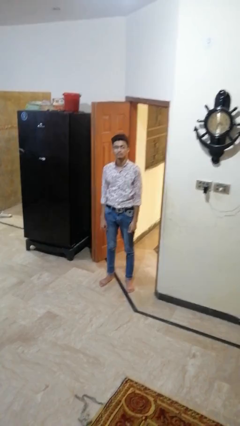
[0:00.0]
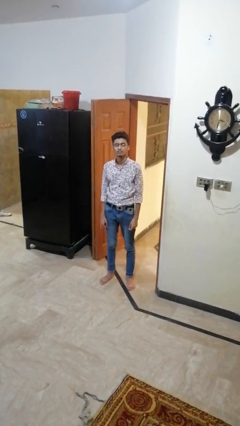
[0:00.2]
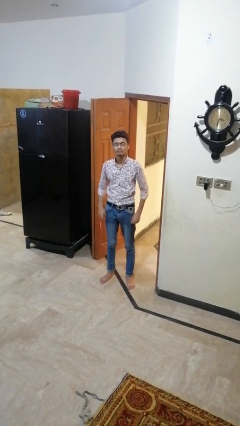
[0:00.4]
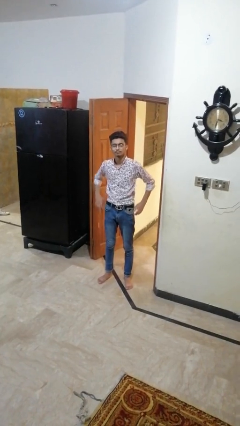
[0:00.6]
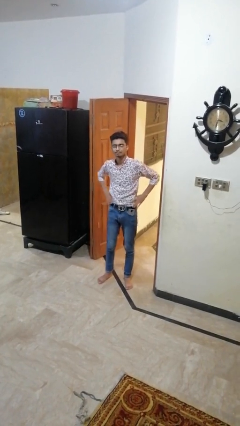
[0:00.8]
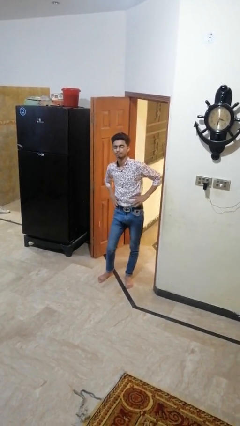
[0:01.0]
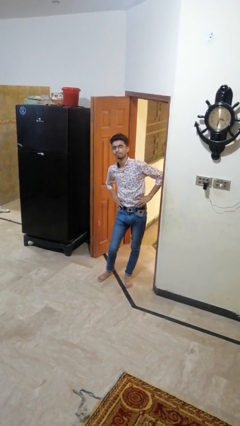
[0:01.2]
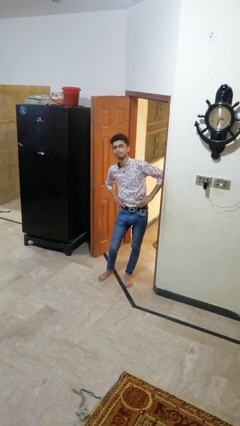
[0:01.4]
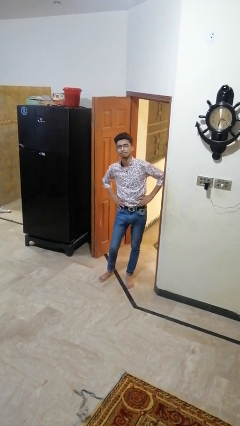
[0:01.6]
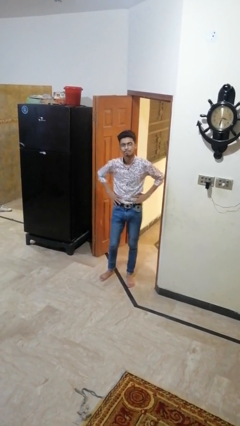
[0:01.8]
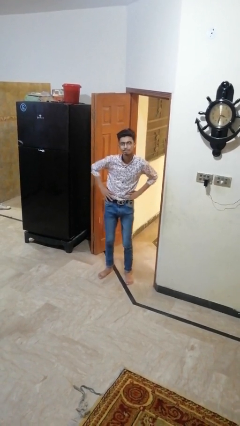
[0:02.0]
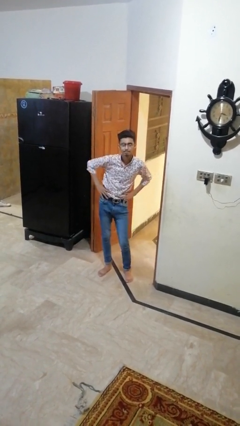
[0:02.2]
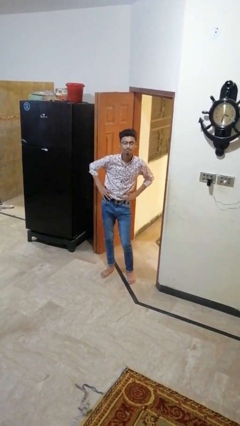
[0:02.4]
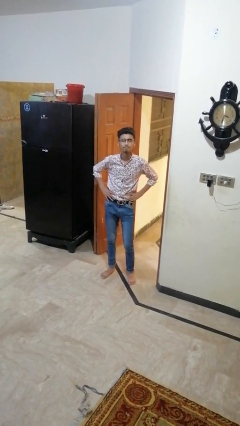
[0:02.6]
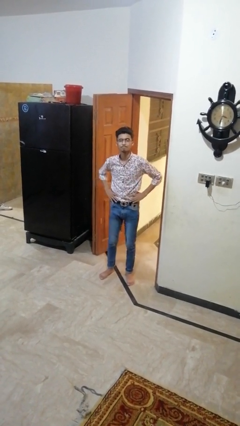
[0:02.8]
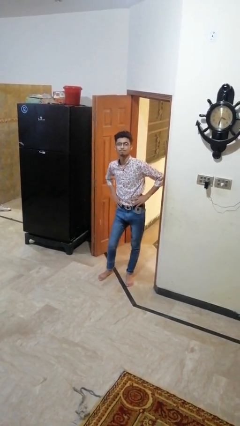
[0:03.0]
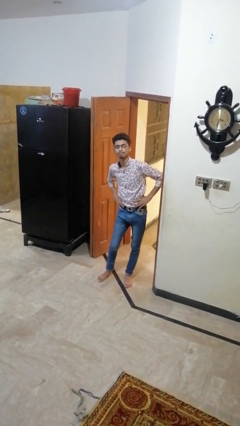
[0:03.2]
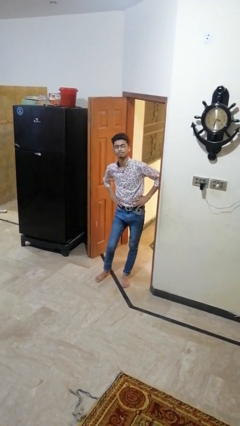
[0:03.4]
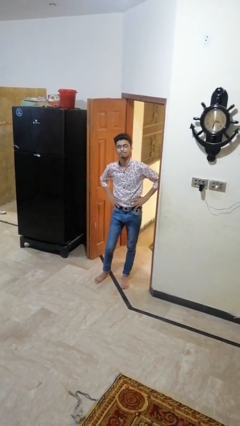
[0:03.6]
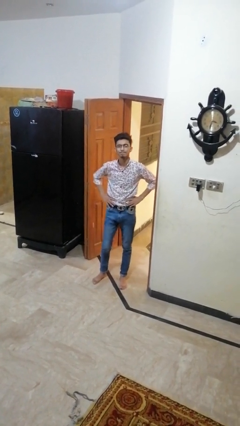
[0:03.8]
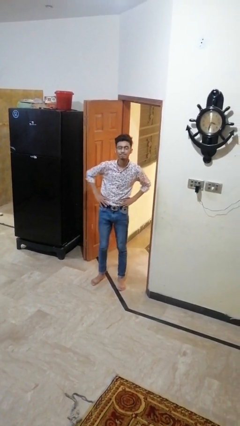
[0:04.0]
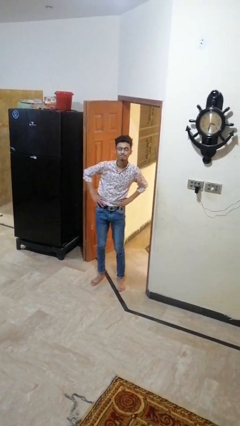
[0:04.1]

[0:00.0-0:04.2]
person wiggles hips

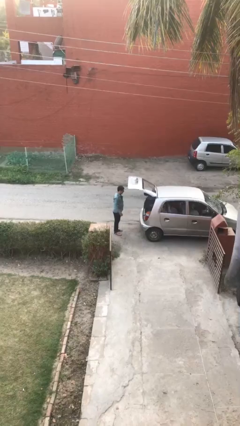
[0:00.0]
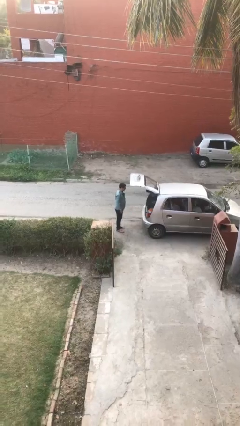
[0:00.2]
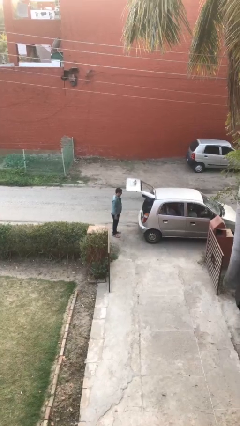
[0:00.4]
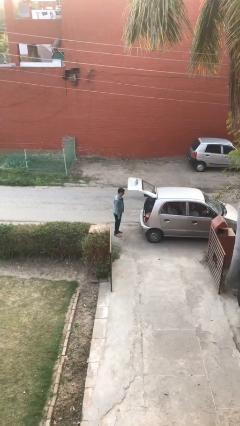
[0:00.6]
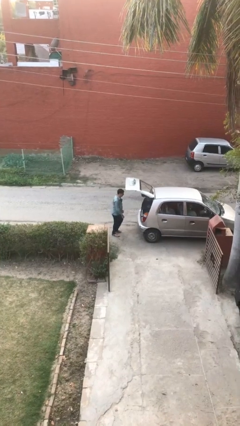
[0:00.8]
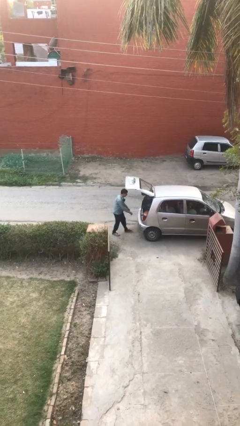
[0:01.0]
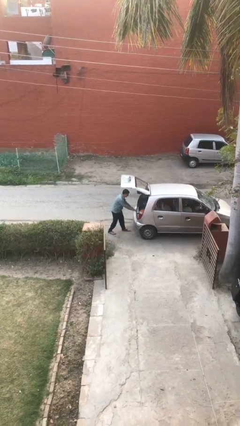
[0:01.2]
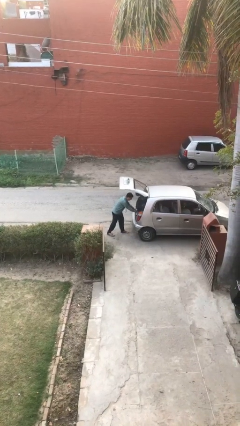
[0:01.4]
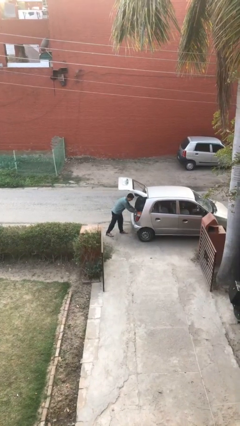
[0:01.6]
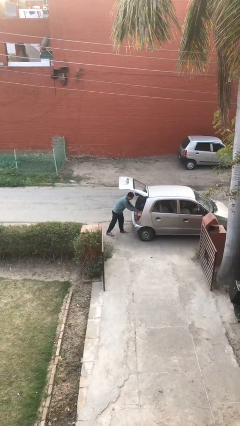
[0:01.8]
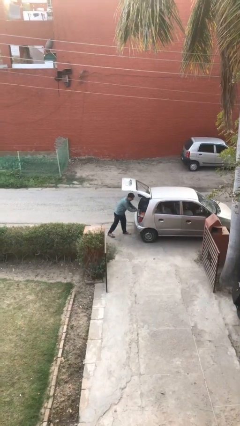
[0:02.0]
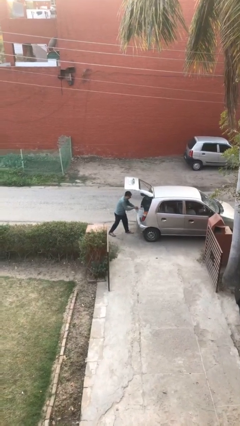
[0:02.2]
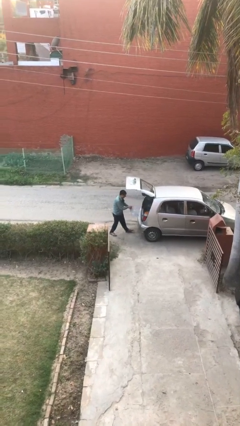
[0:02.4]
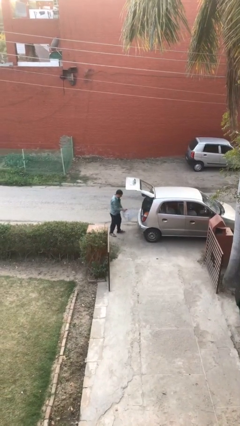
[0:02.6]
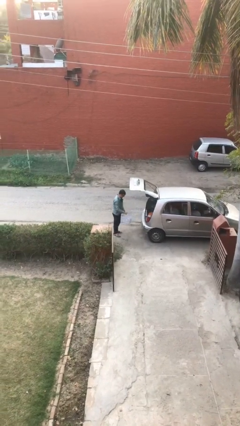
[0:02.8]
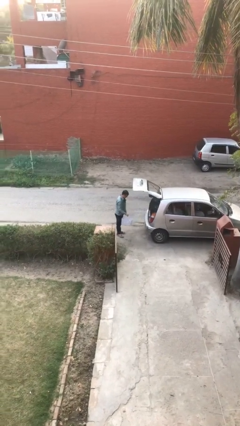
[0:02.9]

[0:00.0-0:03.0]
person unloads car

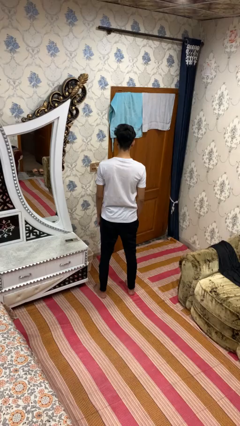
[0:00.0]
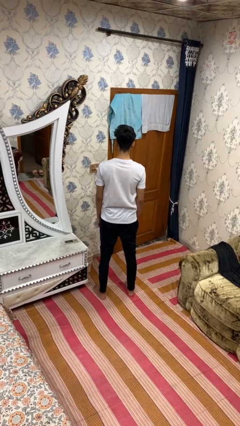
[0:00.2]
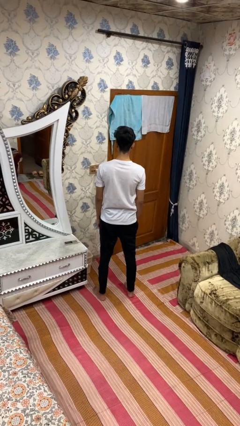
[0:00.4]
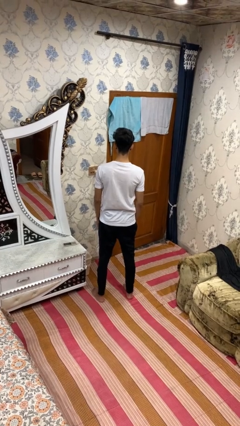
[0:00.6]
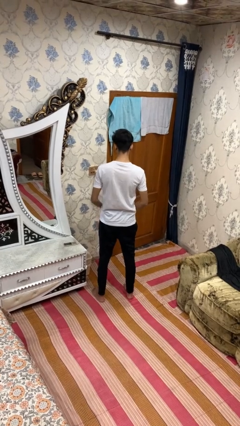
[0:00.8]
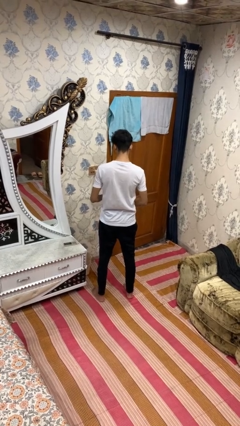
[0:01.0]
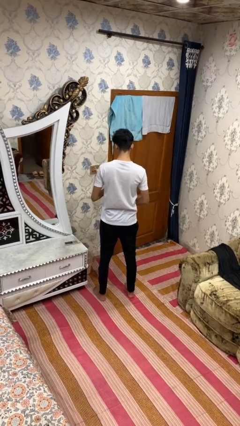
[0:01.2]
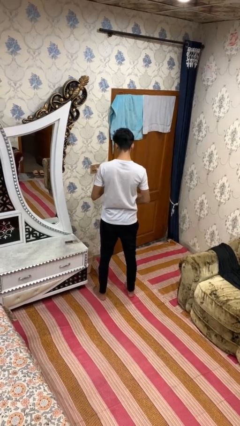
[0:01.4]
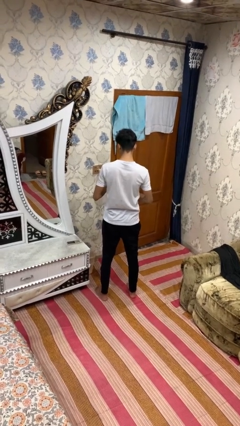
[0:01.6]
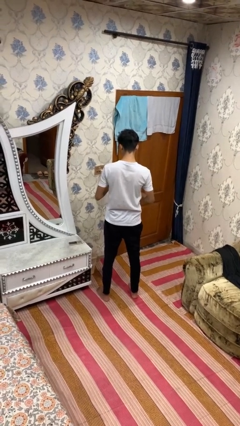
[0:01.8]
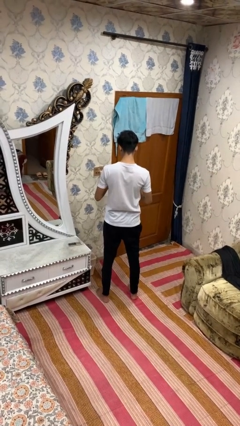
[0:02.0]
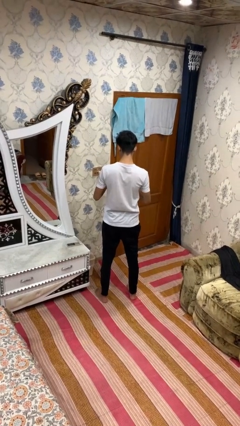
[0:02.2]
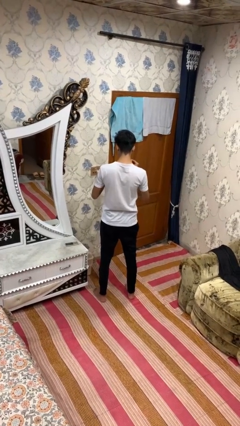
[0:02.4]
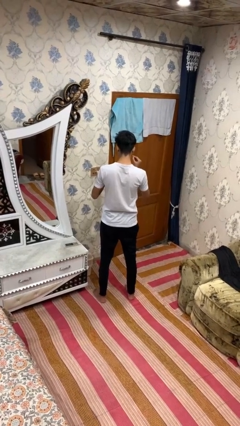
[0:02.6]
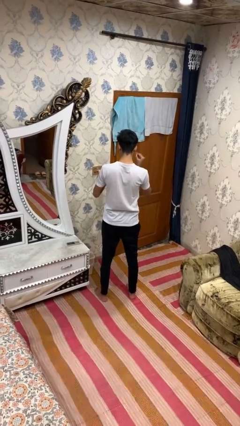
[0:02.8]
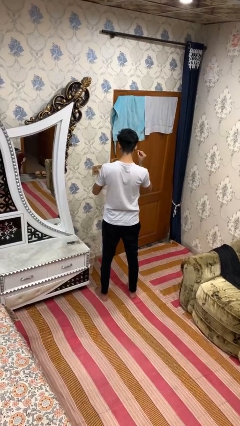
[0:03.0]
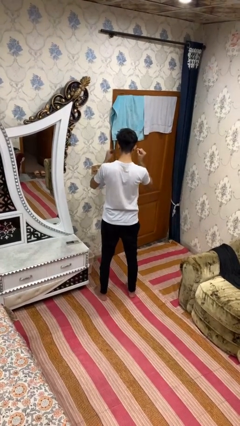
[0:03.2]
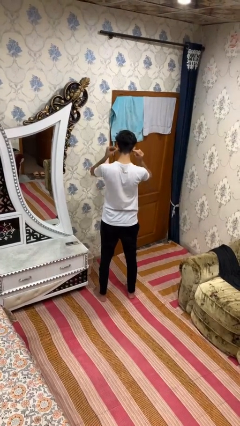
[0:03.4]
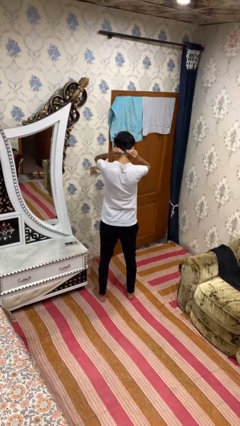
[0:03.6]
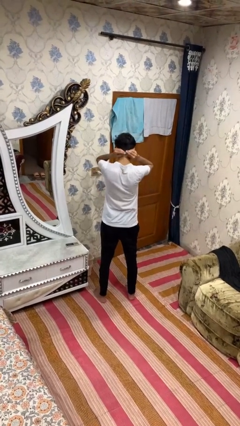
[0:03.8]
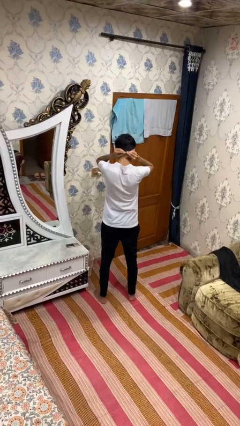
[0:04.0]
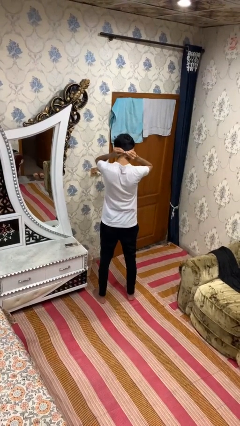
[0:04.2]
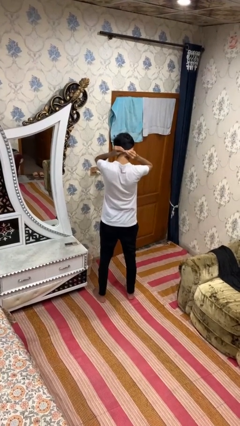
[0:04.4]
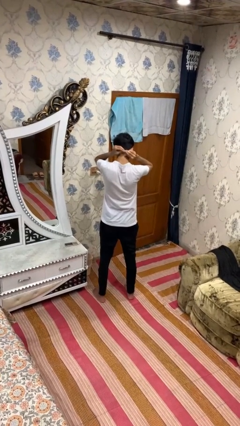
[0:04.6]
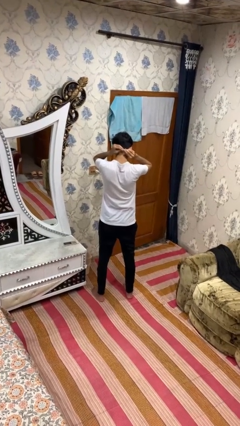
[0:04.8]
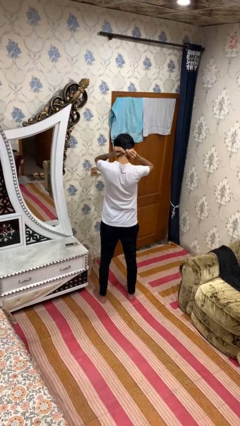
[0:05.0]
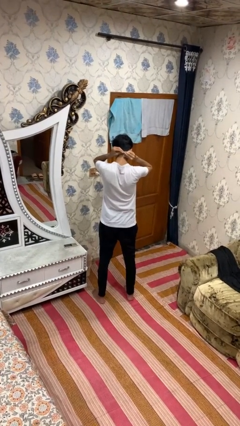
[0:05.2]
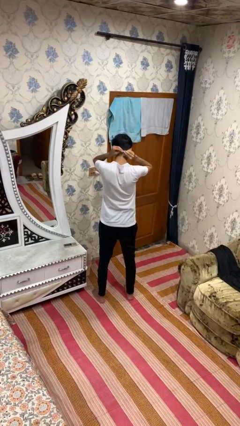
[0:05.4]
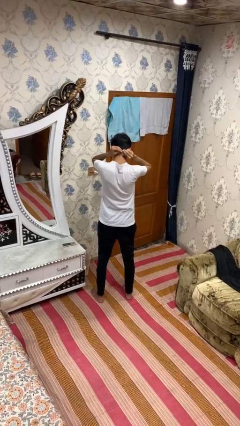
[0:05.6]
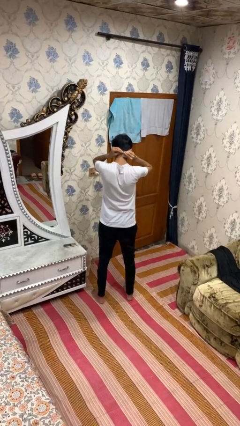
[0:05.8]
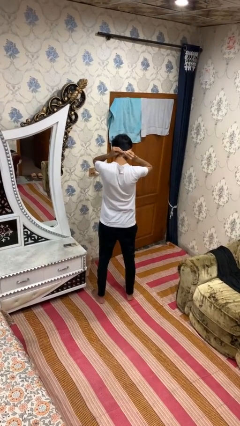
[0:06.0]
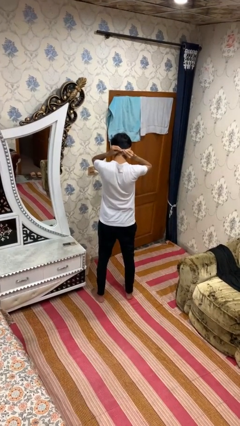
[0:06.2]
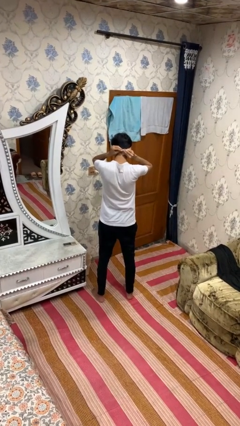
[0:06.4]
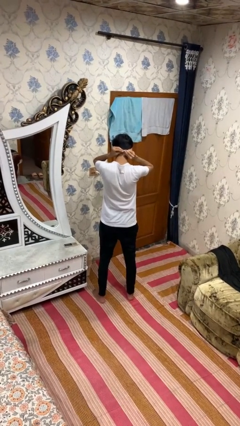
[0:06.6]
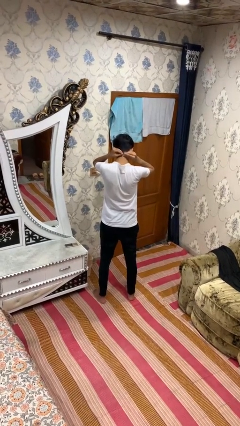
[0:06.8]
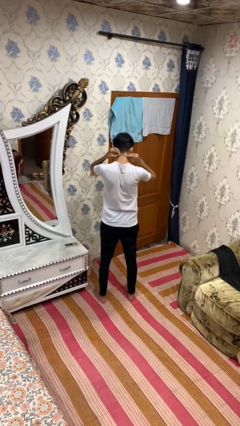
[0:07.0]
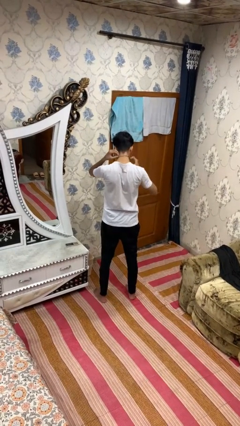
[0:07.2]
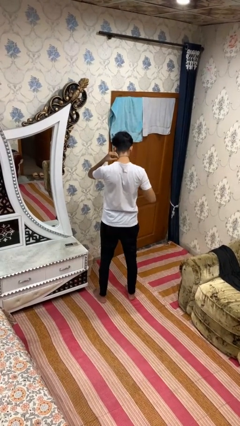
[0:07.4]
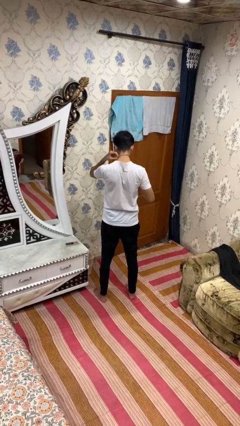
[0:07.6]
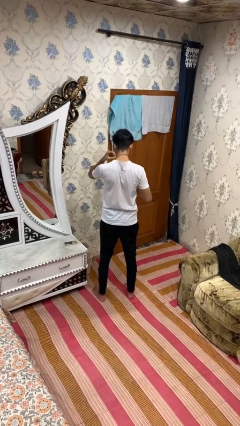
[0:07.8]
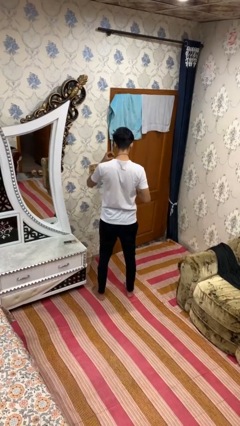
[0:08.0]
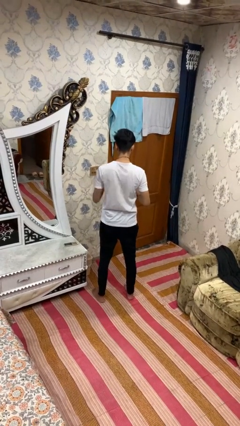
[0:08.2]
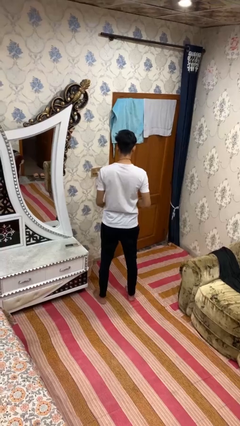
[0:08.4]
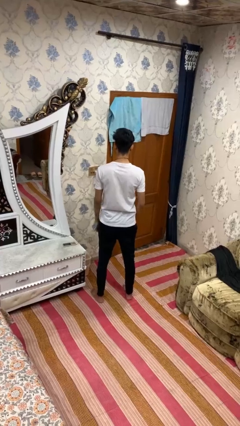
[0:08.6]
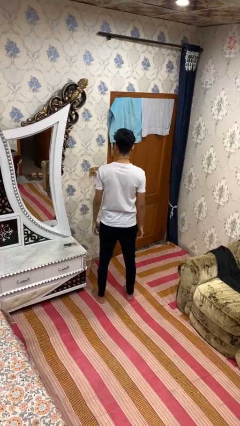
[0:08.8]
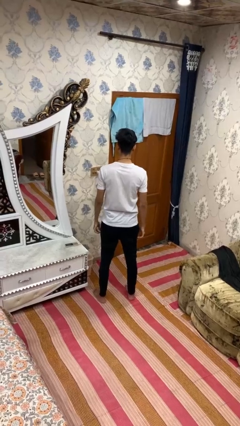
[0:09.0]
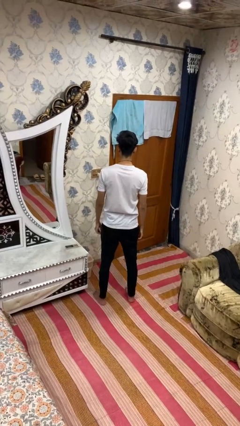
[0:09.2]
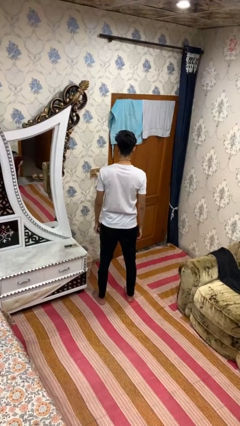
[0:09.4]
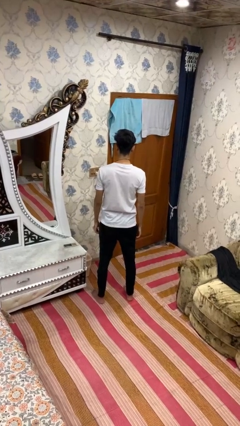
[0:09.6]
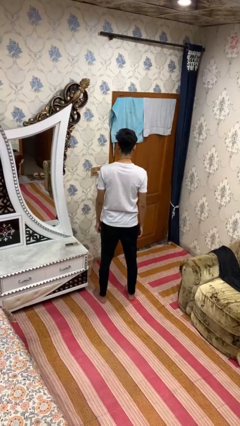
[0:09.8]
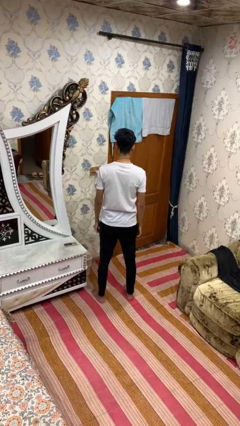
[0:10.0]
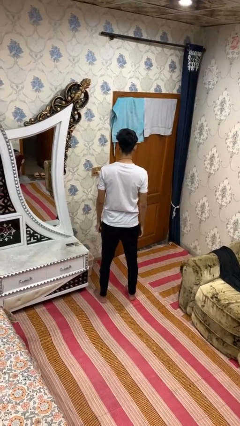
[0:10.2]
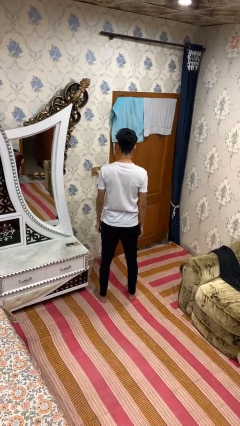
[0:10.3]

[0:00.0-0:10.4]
person puts on necklace

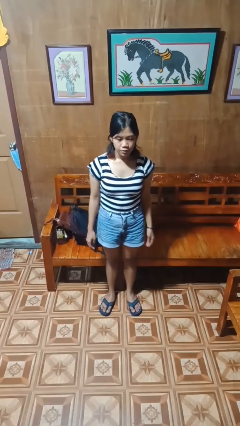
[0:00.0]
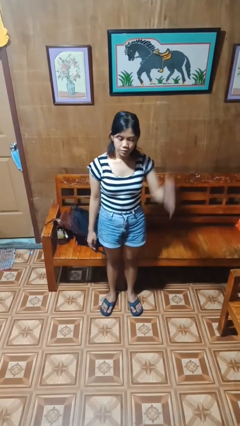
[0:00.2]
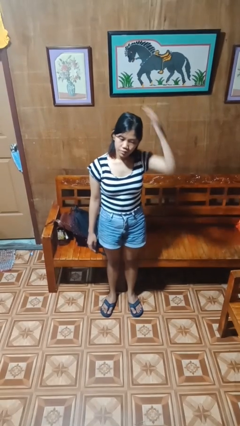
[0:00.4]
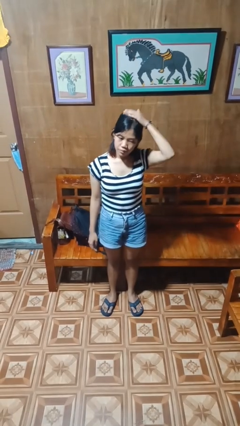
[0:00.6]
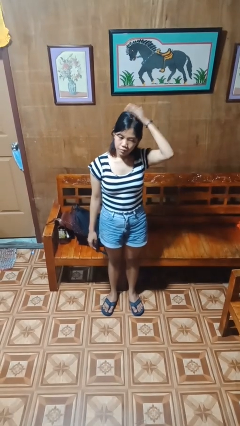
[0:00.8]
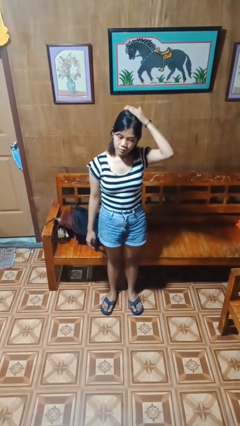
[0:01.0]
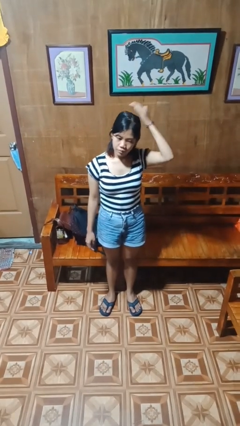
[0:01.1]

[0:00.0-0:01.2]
person pats head
